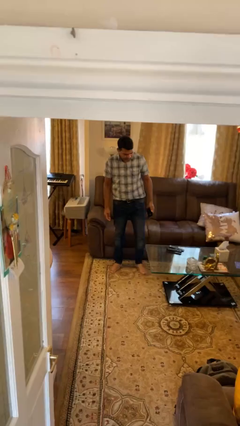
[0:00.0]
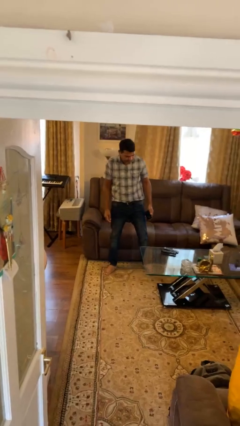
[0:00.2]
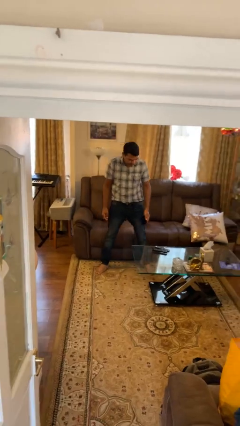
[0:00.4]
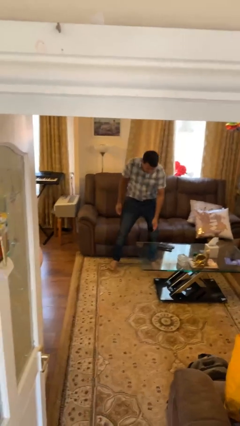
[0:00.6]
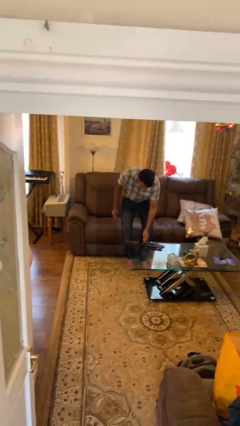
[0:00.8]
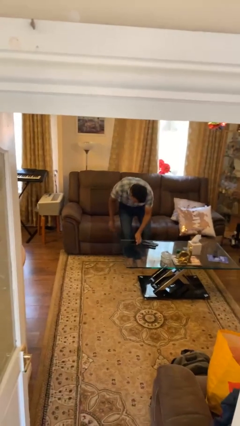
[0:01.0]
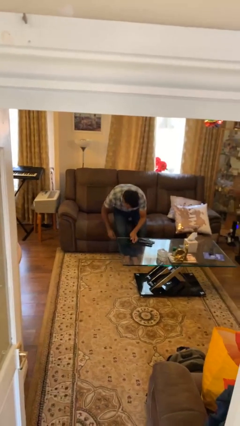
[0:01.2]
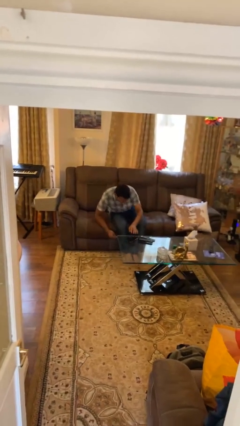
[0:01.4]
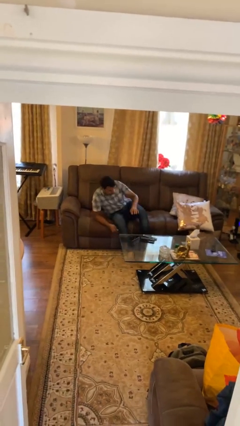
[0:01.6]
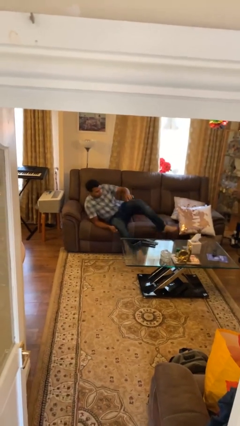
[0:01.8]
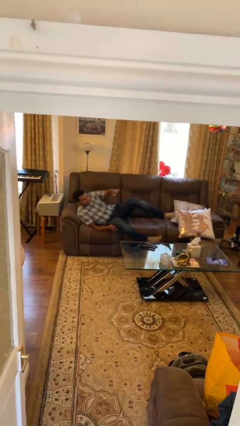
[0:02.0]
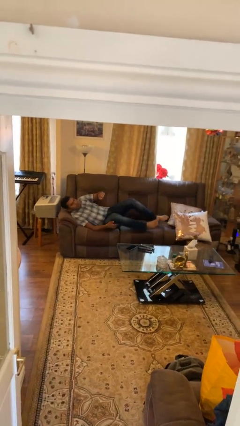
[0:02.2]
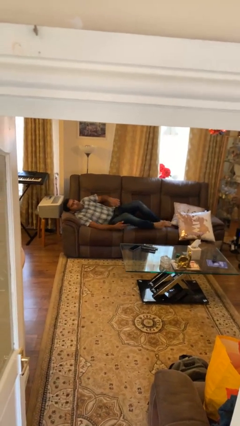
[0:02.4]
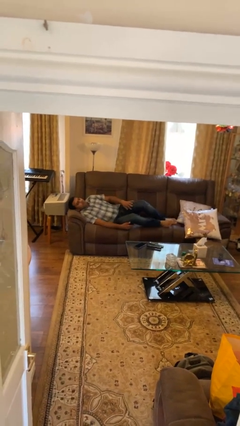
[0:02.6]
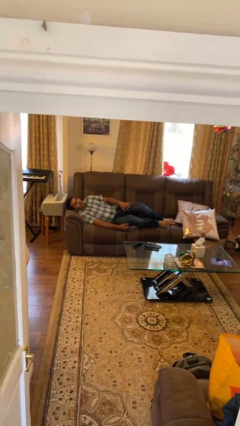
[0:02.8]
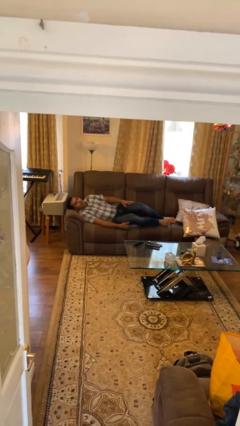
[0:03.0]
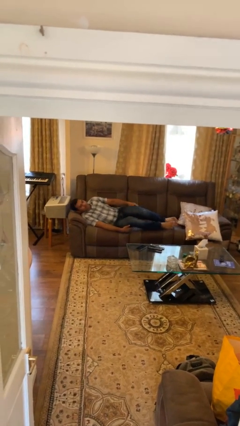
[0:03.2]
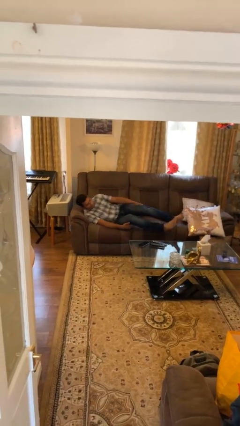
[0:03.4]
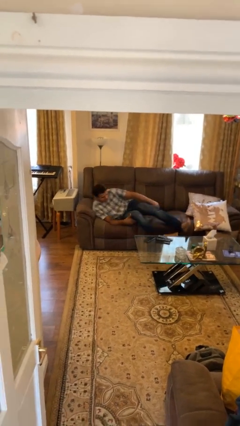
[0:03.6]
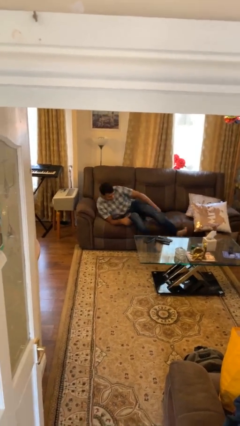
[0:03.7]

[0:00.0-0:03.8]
person lies down on couch

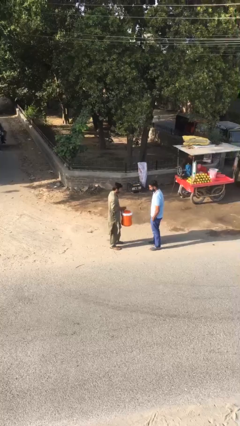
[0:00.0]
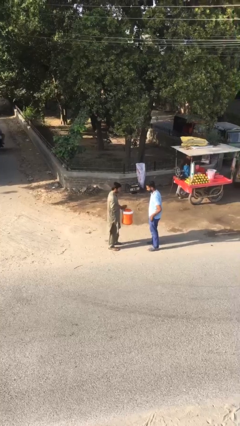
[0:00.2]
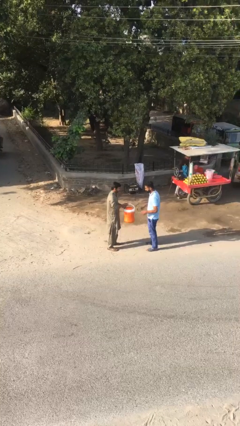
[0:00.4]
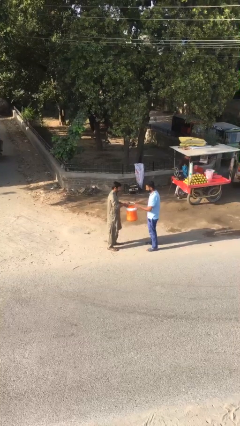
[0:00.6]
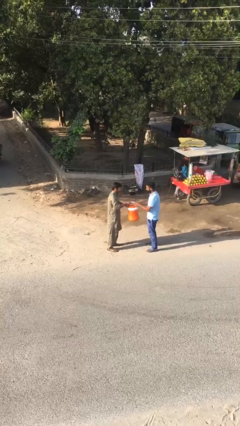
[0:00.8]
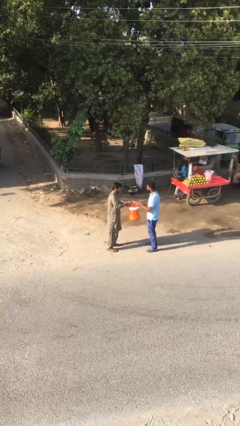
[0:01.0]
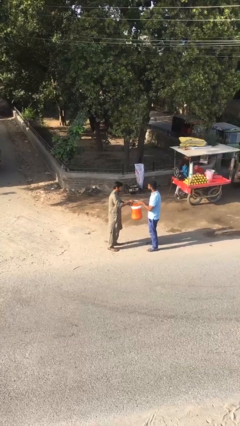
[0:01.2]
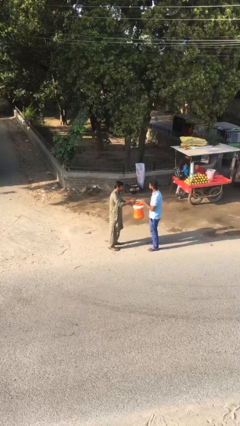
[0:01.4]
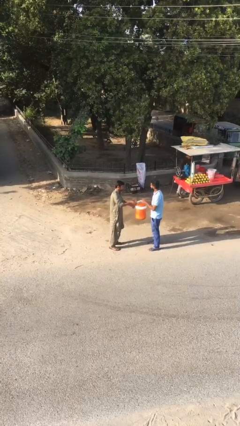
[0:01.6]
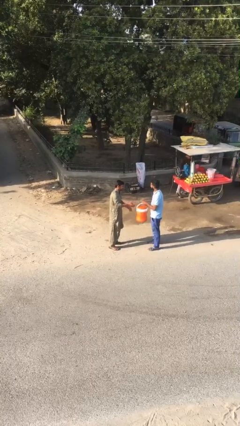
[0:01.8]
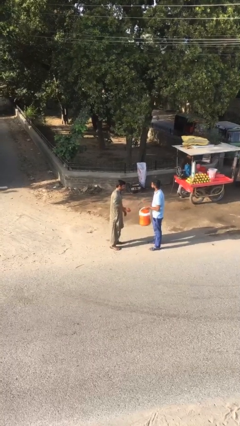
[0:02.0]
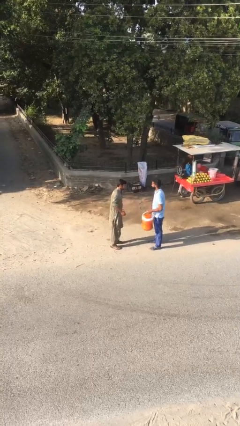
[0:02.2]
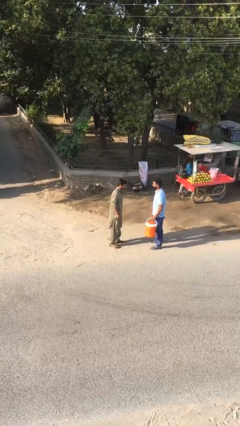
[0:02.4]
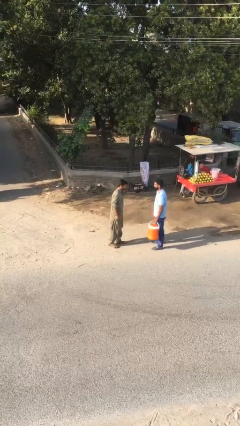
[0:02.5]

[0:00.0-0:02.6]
person transfers object to person

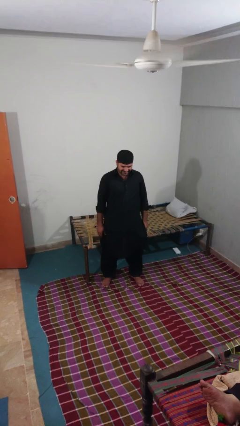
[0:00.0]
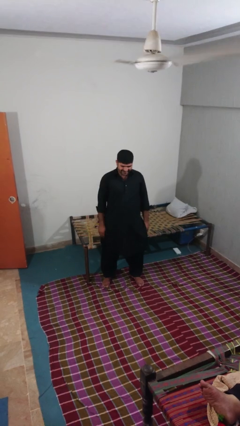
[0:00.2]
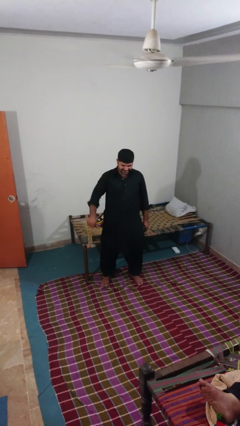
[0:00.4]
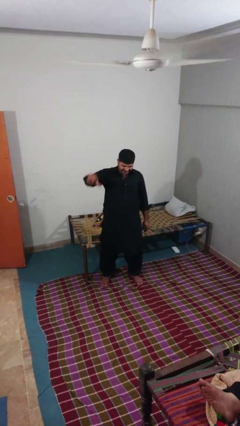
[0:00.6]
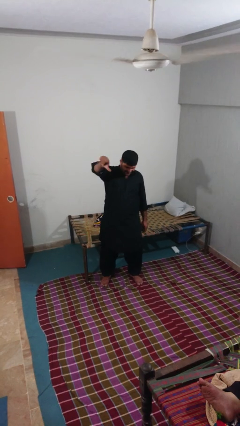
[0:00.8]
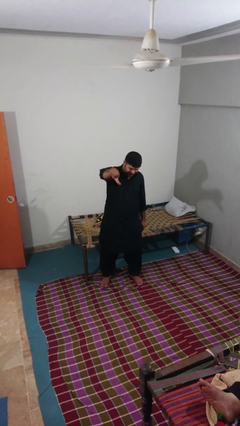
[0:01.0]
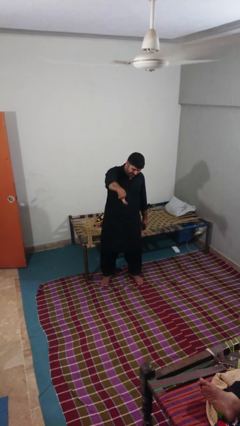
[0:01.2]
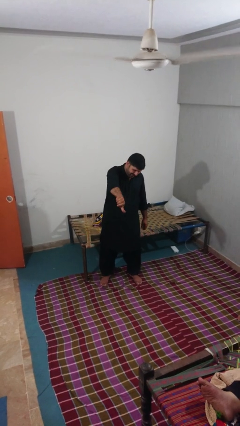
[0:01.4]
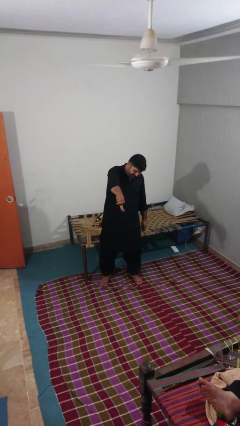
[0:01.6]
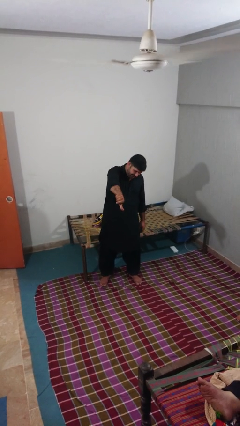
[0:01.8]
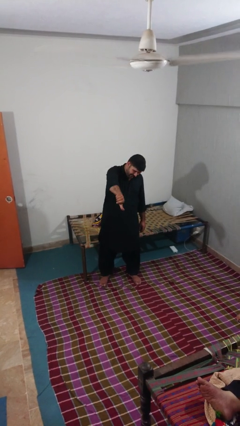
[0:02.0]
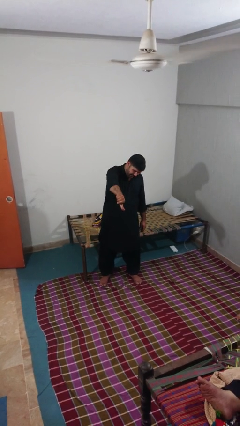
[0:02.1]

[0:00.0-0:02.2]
person gestures thumbs down

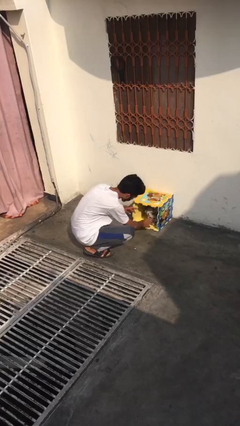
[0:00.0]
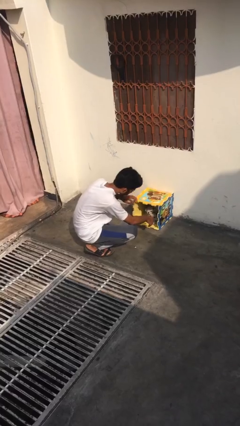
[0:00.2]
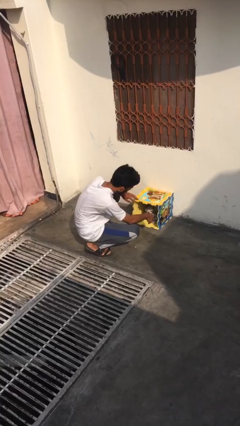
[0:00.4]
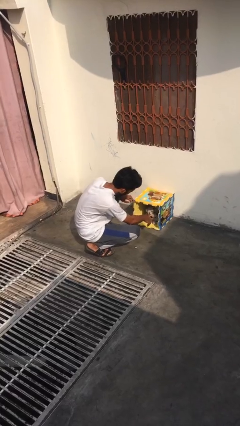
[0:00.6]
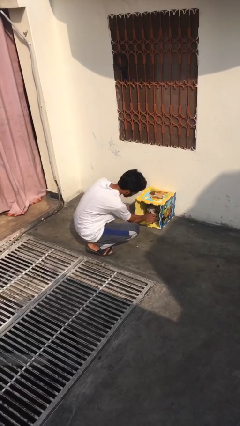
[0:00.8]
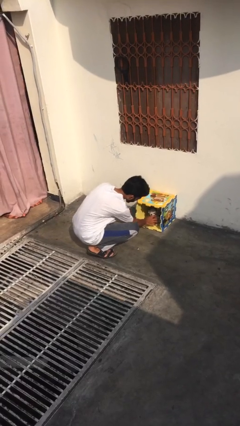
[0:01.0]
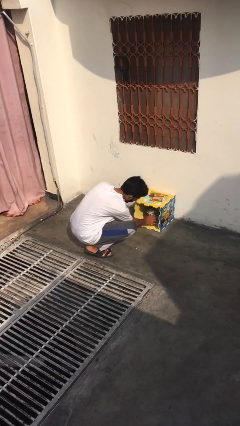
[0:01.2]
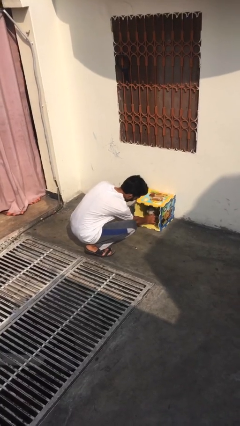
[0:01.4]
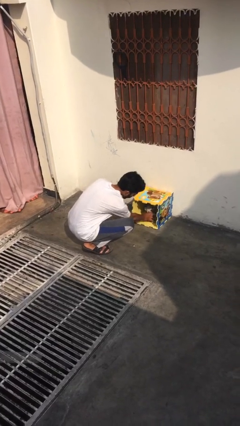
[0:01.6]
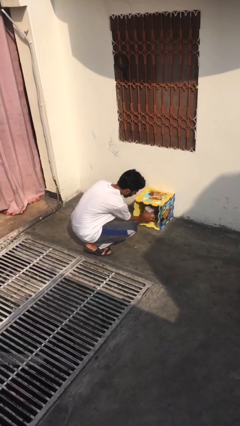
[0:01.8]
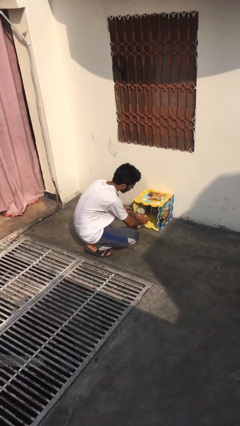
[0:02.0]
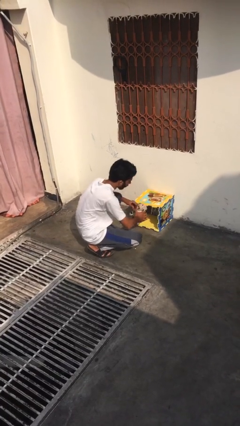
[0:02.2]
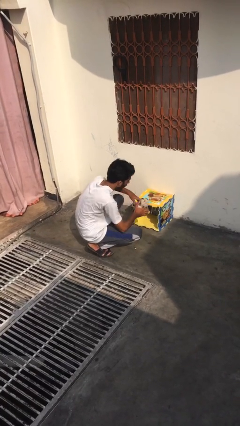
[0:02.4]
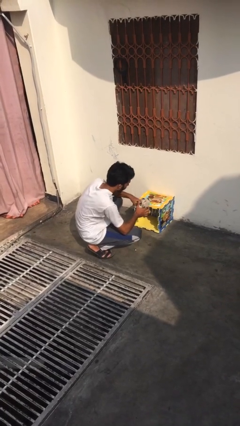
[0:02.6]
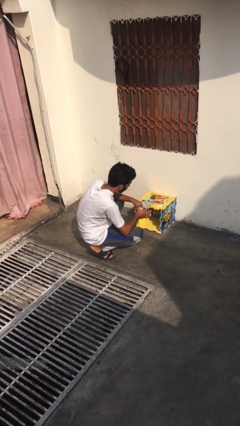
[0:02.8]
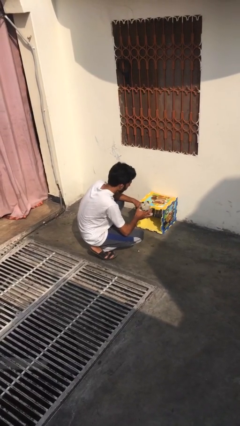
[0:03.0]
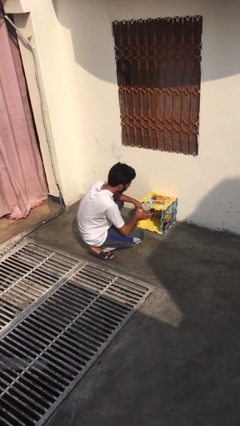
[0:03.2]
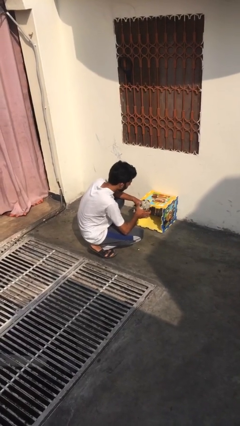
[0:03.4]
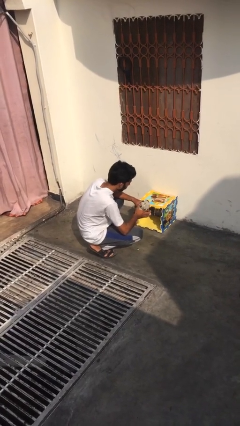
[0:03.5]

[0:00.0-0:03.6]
person uncrates dog

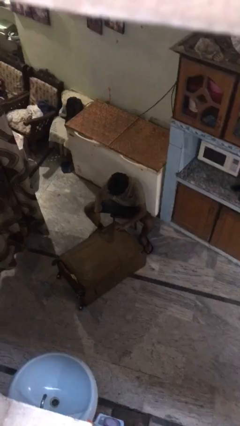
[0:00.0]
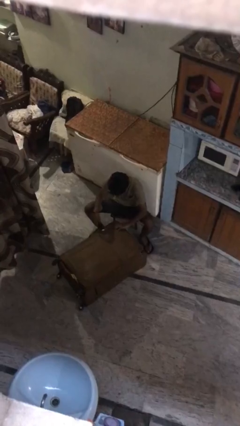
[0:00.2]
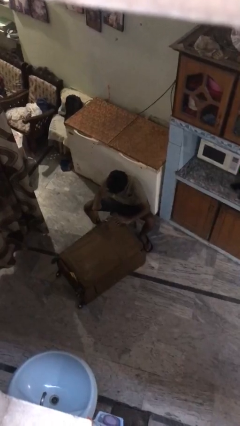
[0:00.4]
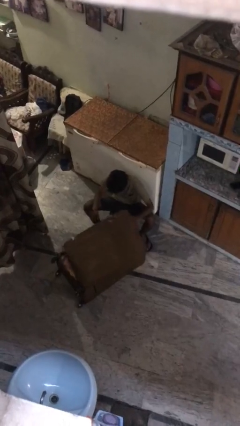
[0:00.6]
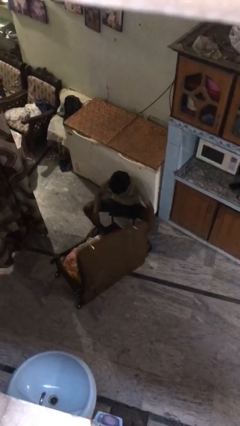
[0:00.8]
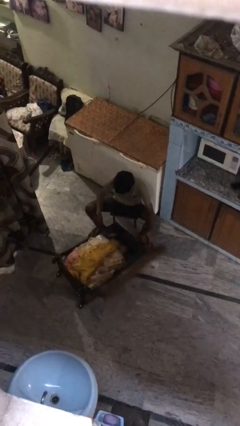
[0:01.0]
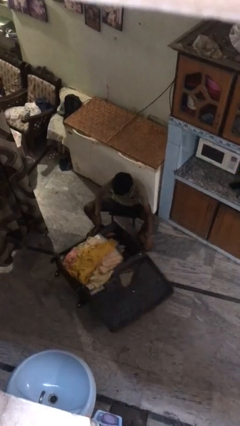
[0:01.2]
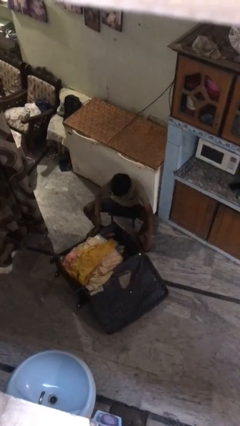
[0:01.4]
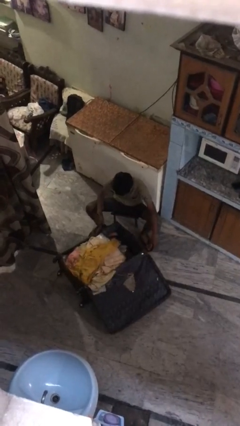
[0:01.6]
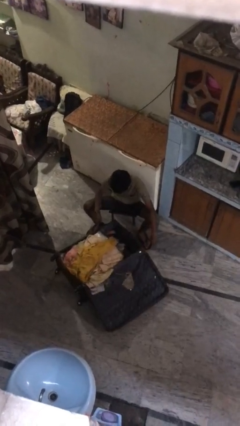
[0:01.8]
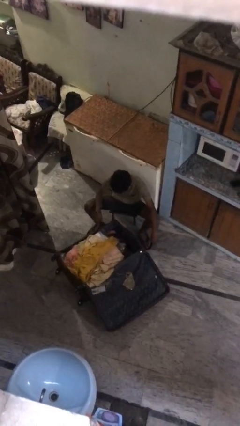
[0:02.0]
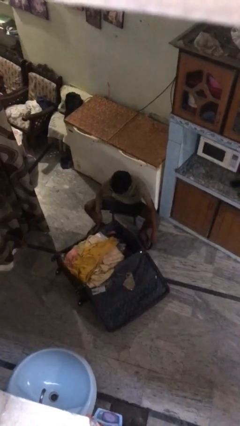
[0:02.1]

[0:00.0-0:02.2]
person opens suitcase

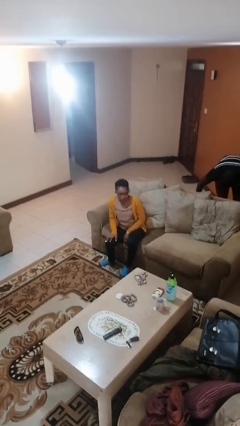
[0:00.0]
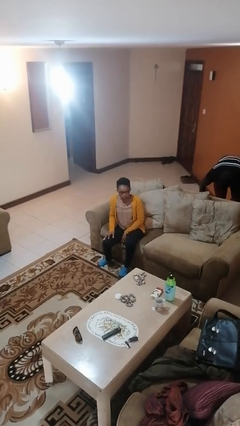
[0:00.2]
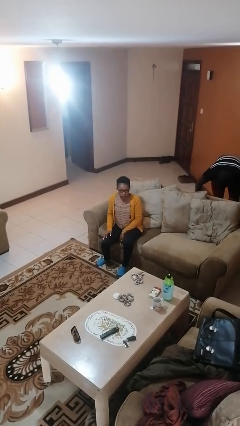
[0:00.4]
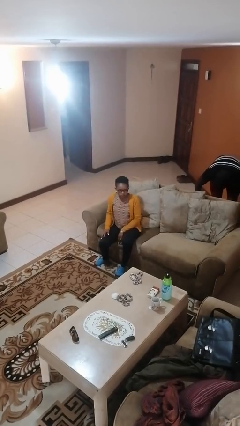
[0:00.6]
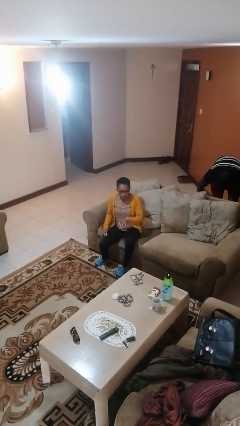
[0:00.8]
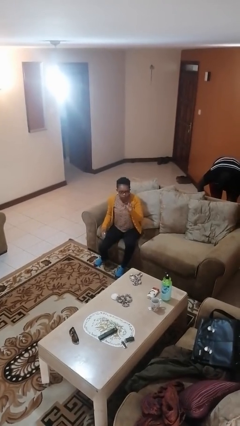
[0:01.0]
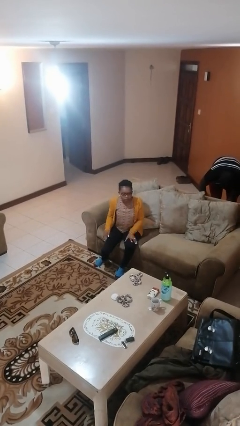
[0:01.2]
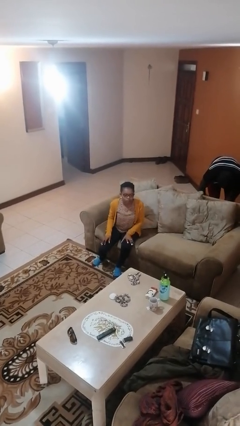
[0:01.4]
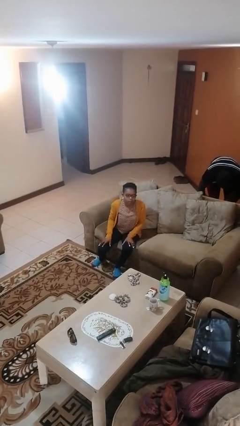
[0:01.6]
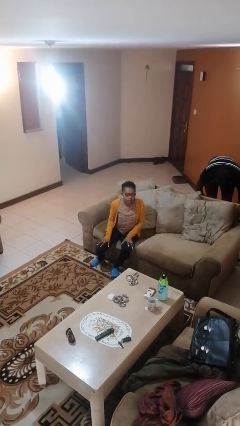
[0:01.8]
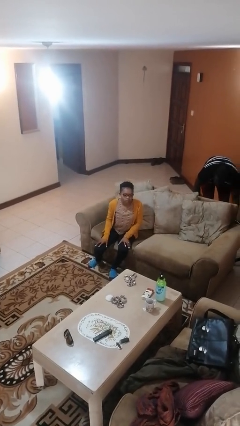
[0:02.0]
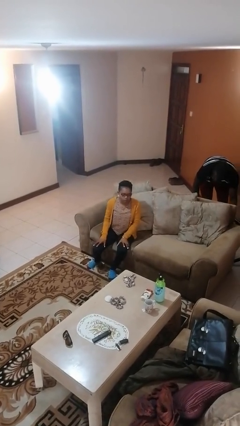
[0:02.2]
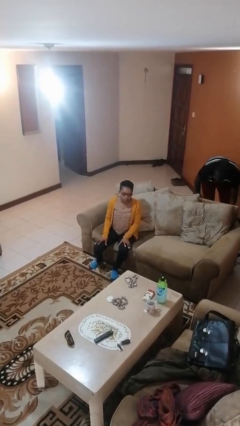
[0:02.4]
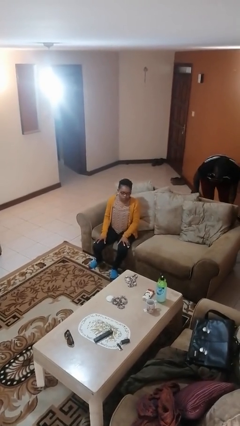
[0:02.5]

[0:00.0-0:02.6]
person slaps hands on thighs
